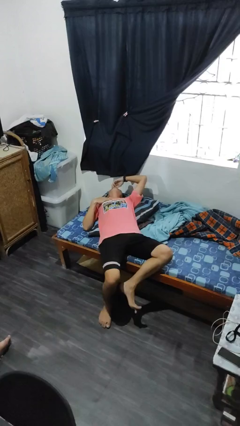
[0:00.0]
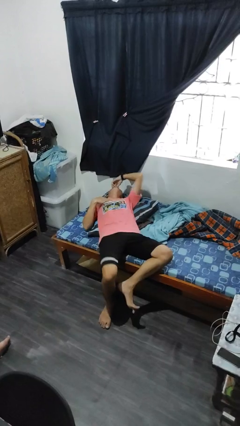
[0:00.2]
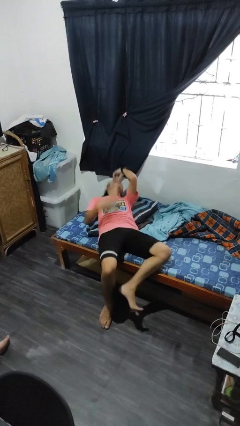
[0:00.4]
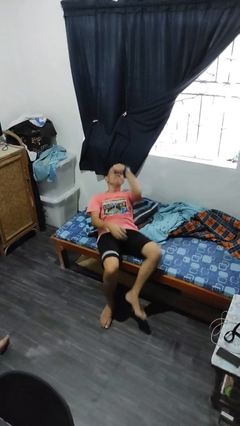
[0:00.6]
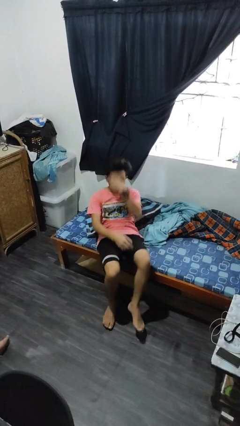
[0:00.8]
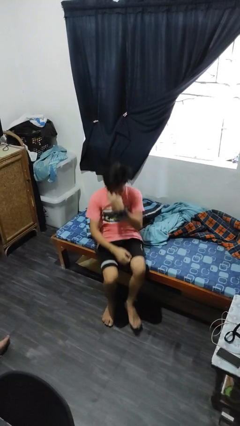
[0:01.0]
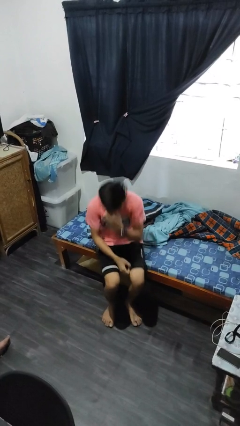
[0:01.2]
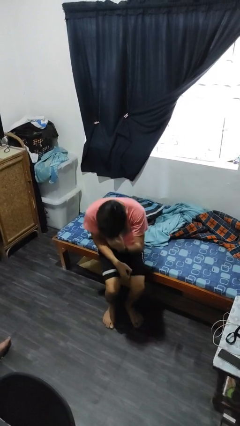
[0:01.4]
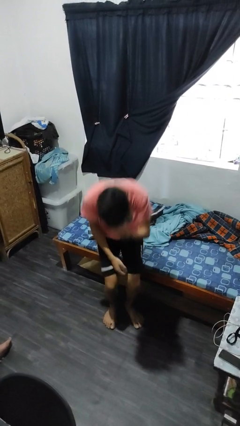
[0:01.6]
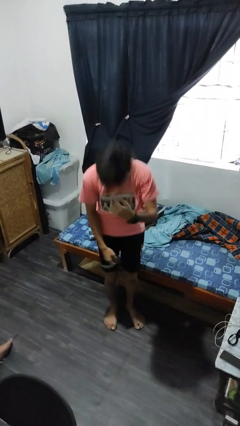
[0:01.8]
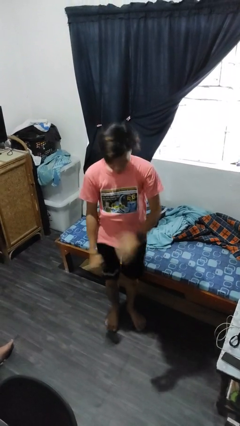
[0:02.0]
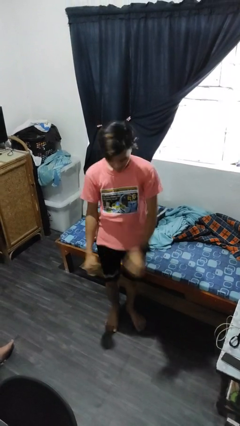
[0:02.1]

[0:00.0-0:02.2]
person stands up

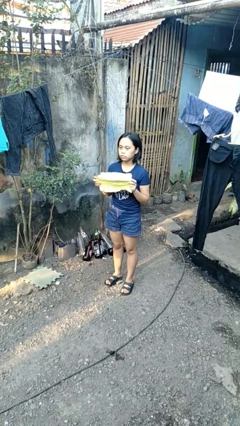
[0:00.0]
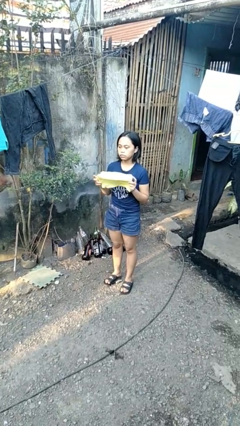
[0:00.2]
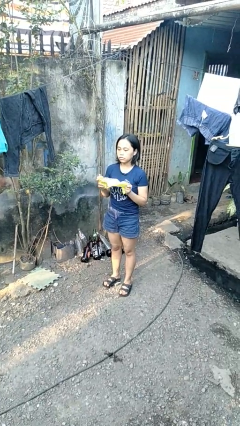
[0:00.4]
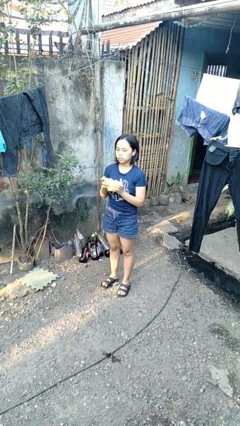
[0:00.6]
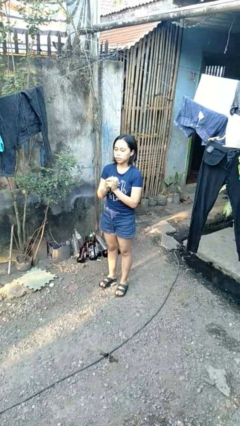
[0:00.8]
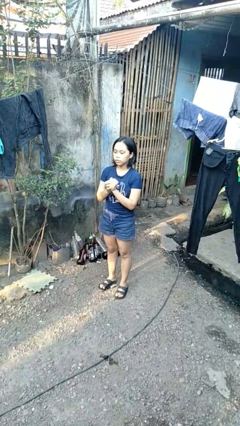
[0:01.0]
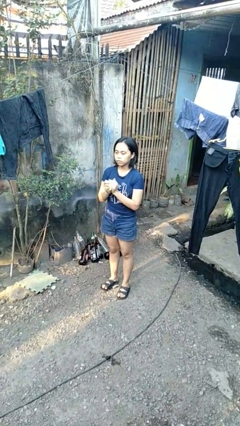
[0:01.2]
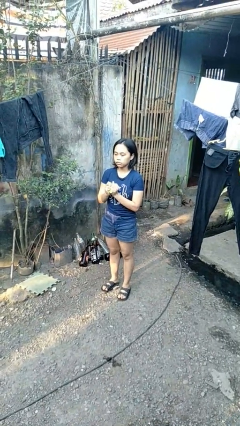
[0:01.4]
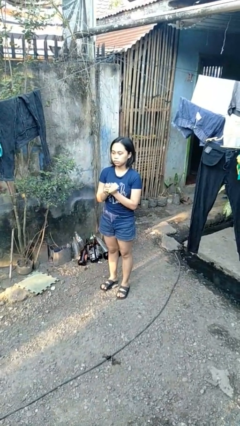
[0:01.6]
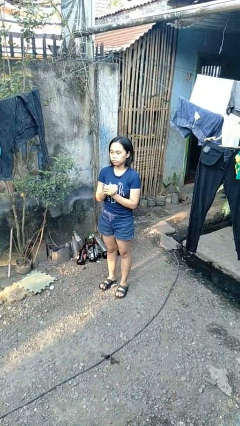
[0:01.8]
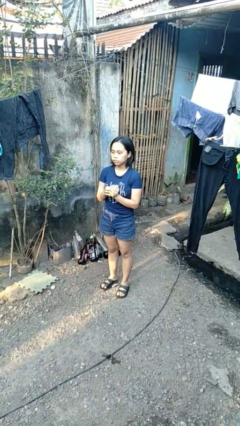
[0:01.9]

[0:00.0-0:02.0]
person crumples paper

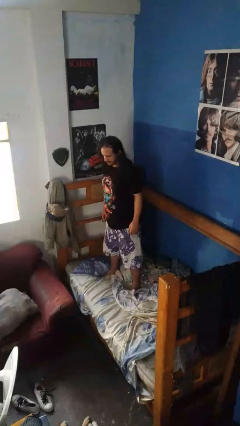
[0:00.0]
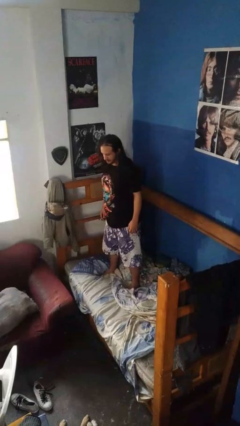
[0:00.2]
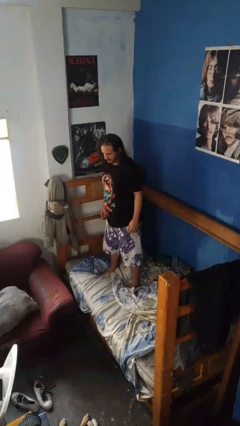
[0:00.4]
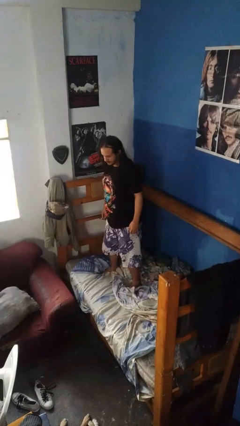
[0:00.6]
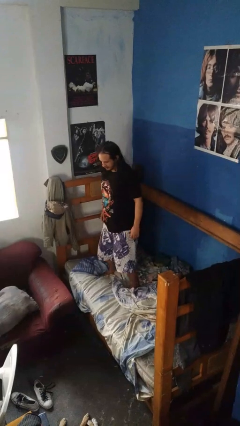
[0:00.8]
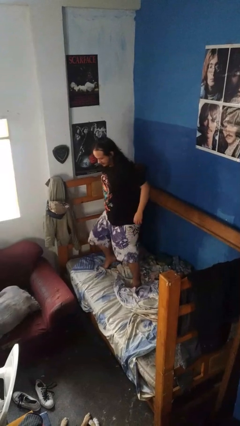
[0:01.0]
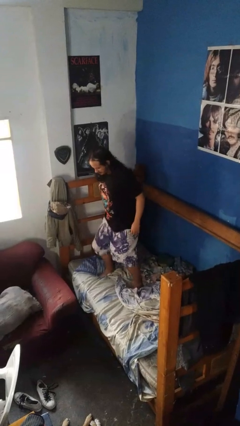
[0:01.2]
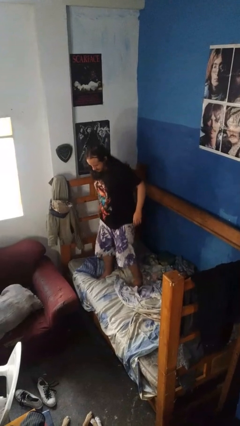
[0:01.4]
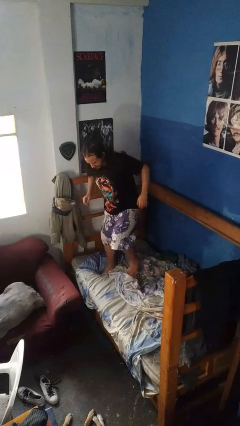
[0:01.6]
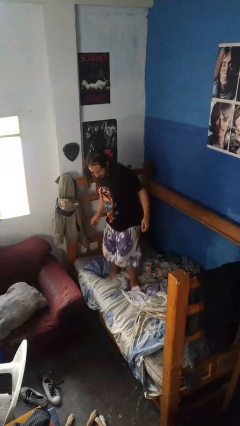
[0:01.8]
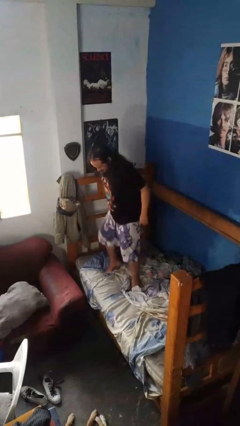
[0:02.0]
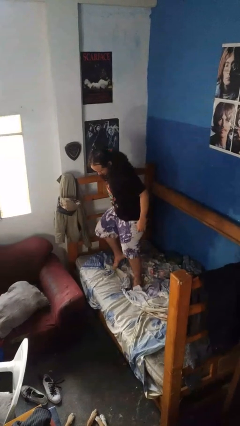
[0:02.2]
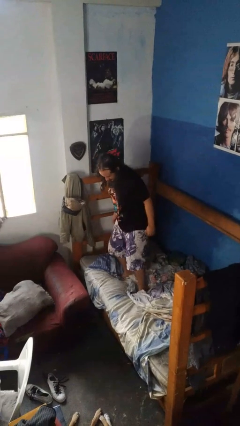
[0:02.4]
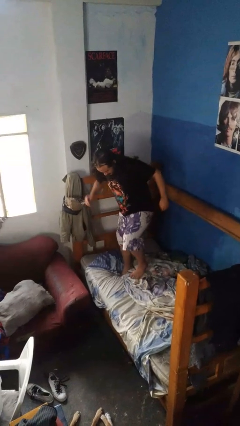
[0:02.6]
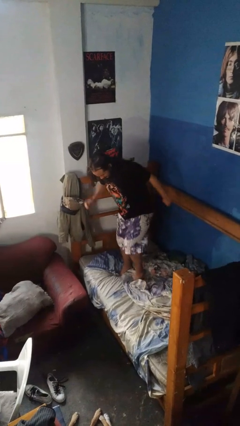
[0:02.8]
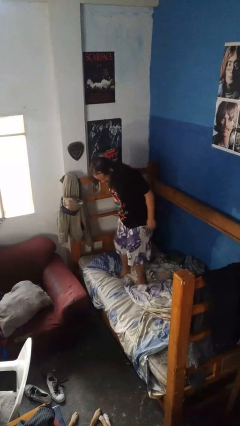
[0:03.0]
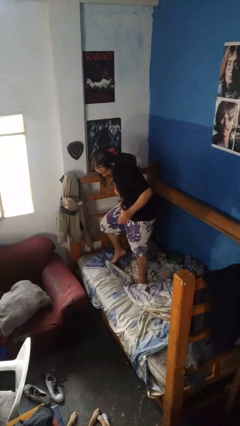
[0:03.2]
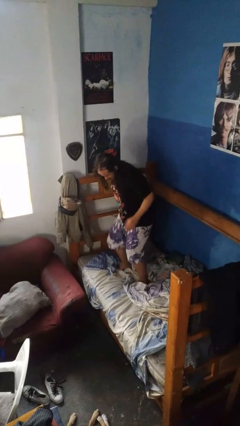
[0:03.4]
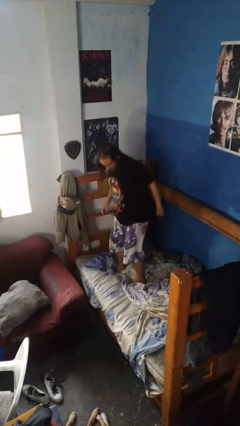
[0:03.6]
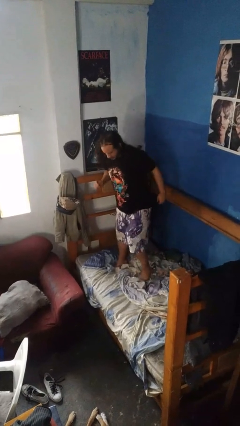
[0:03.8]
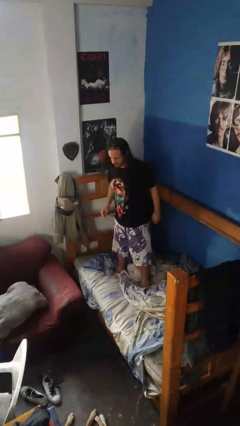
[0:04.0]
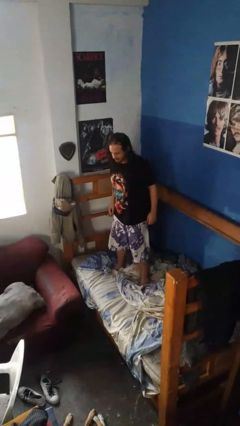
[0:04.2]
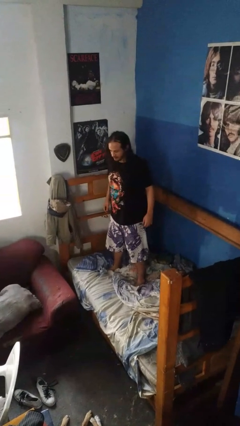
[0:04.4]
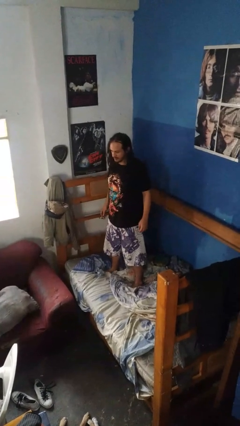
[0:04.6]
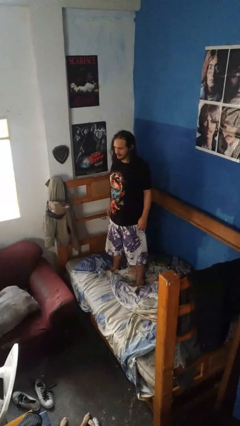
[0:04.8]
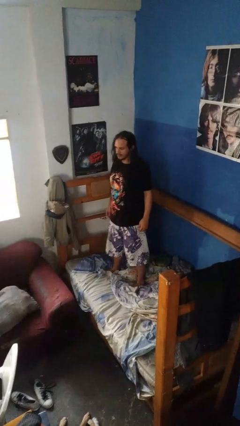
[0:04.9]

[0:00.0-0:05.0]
person jumps on bed

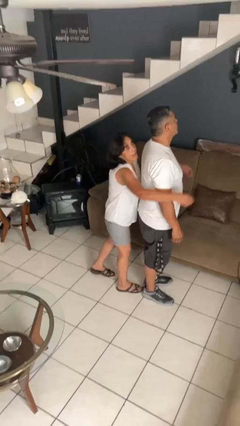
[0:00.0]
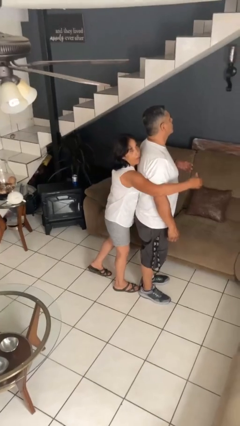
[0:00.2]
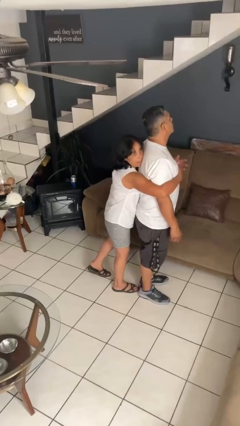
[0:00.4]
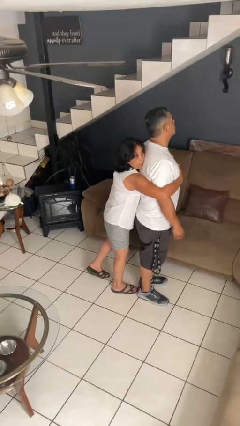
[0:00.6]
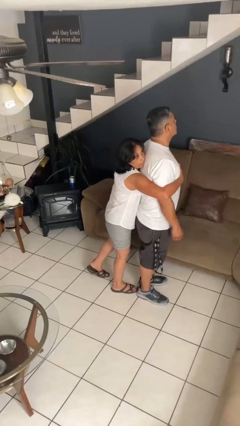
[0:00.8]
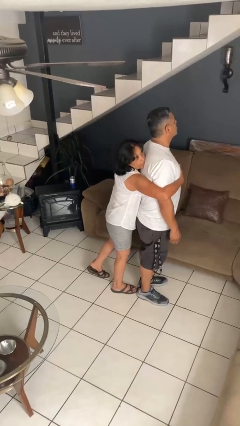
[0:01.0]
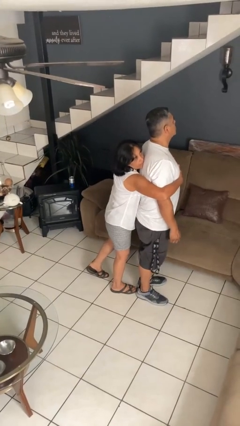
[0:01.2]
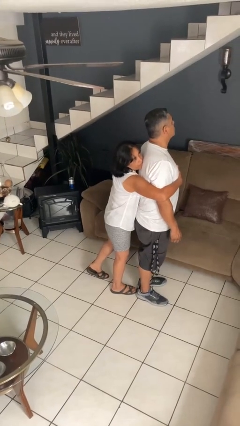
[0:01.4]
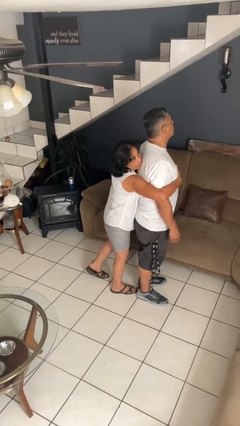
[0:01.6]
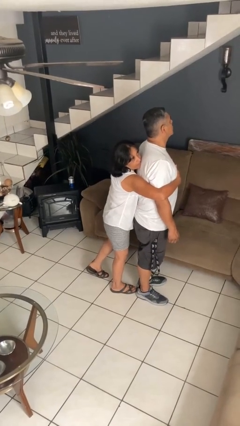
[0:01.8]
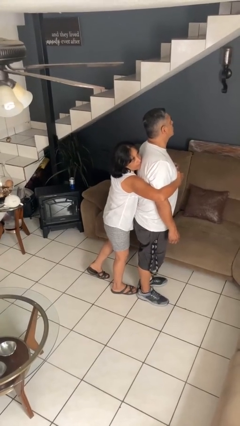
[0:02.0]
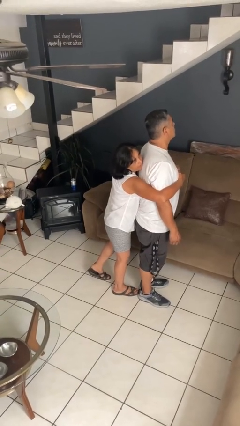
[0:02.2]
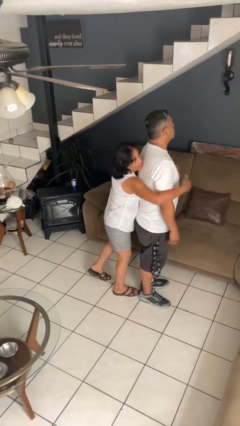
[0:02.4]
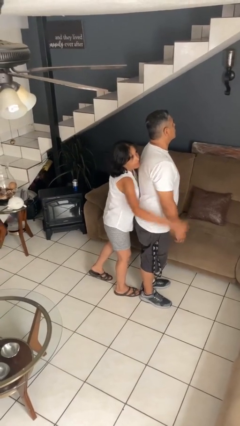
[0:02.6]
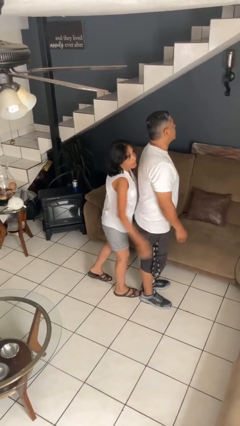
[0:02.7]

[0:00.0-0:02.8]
person hugs person from behind

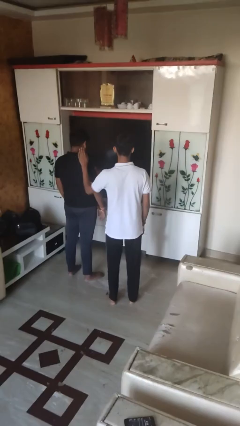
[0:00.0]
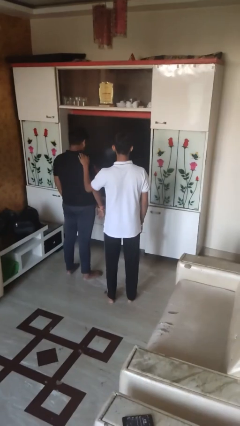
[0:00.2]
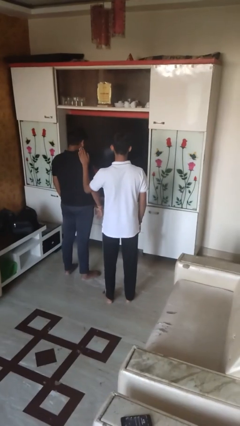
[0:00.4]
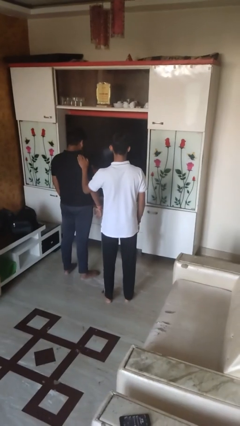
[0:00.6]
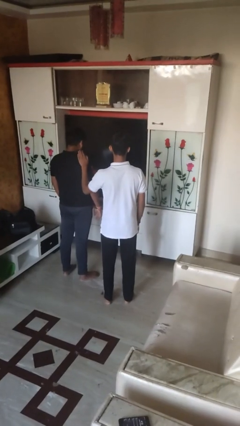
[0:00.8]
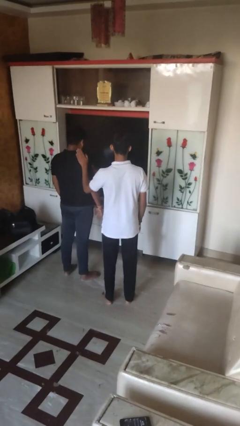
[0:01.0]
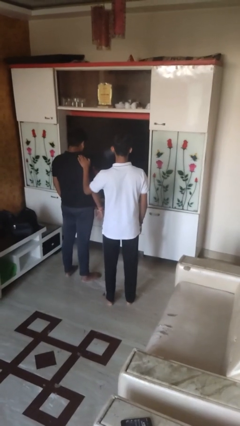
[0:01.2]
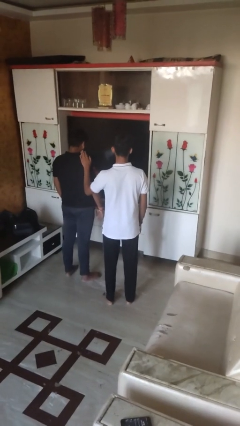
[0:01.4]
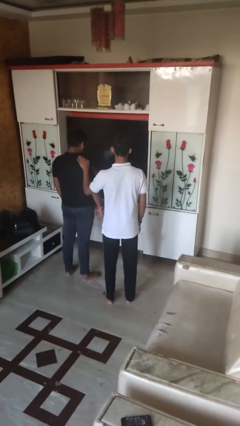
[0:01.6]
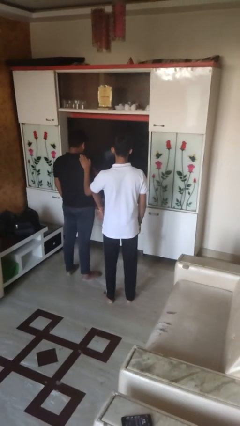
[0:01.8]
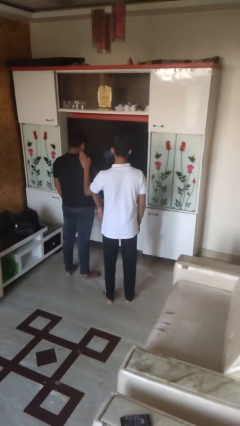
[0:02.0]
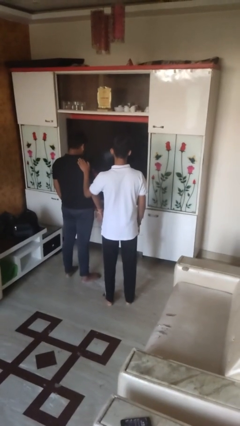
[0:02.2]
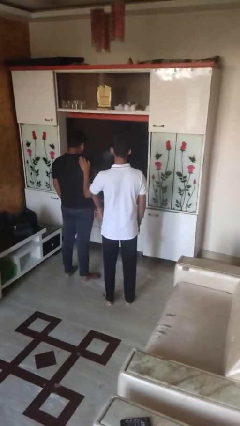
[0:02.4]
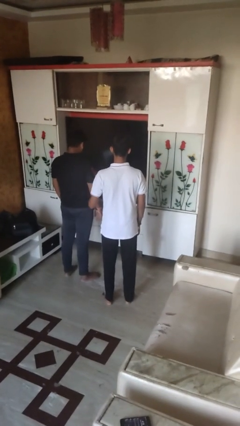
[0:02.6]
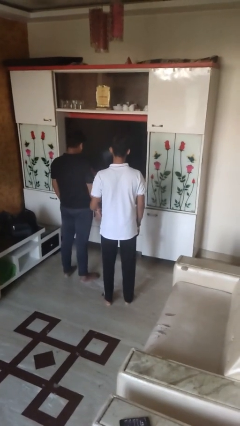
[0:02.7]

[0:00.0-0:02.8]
person pounds shoulders of person

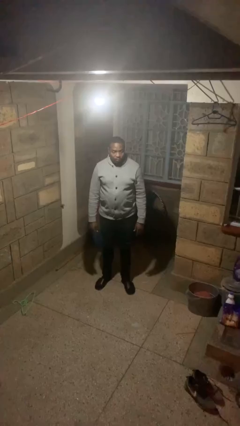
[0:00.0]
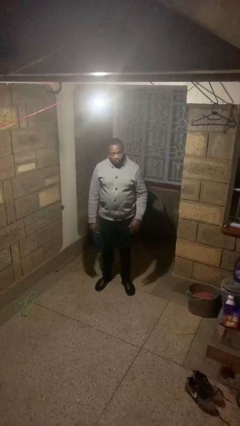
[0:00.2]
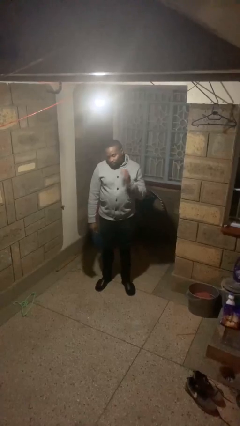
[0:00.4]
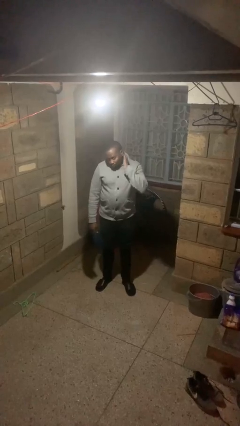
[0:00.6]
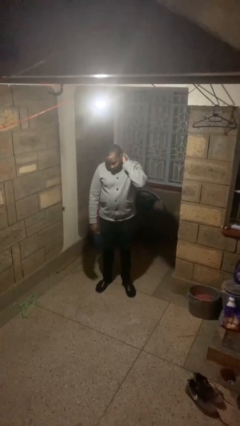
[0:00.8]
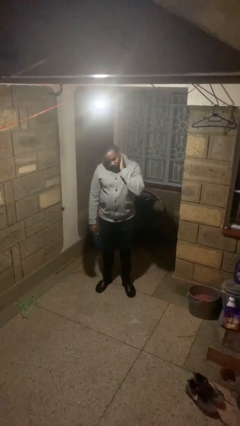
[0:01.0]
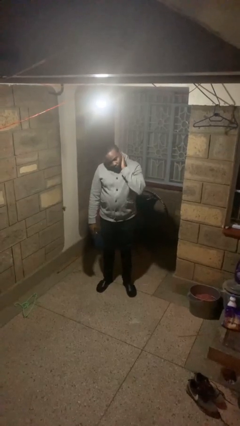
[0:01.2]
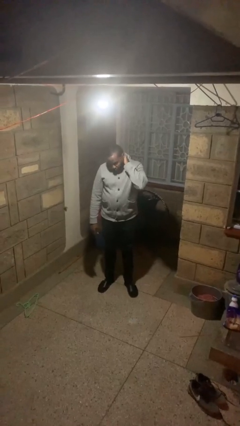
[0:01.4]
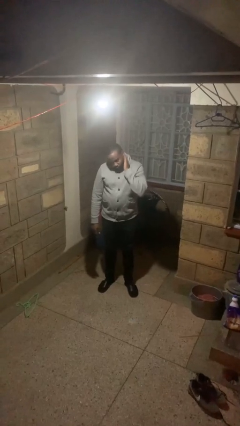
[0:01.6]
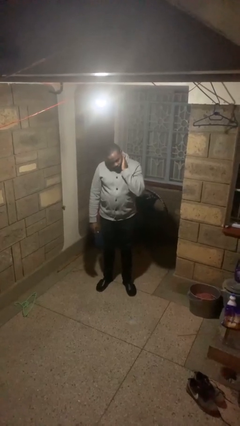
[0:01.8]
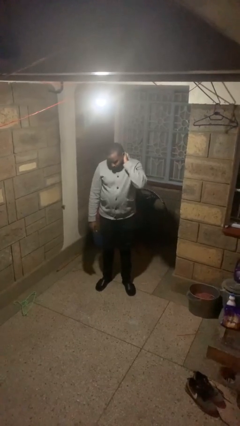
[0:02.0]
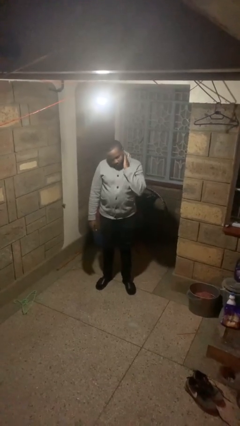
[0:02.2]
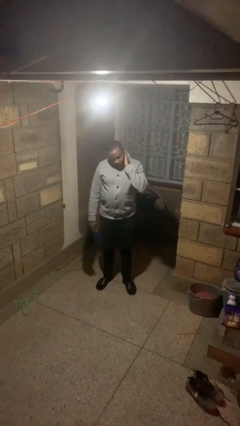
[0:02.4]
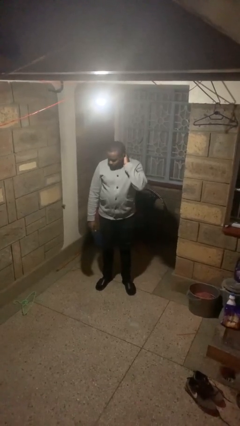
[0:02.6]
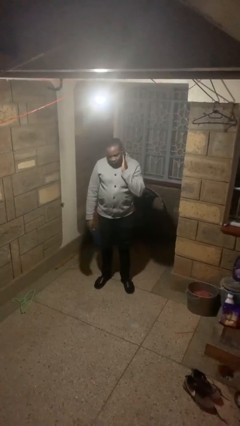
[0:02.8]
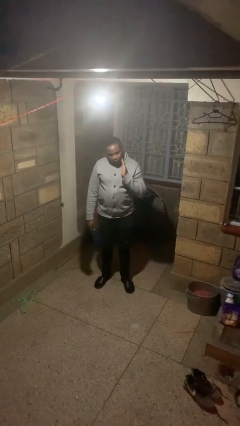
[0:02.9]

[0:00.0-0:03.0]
person rubs neck
